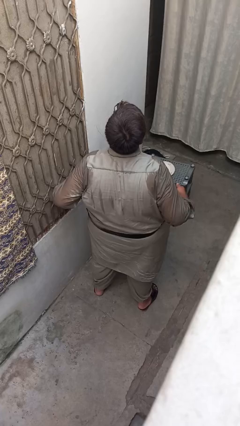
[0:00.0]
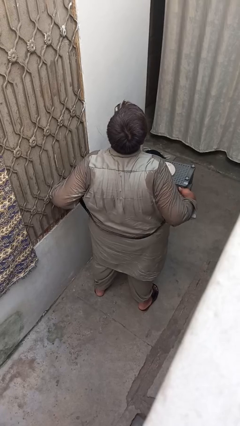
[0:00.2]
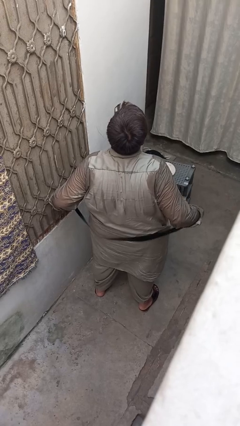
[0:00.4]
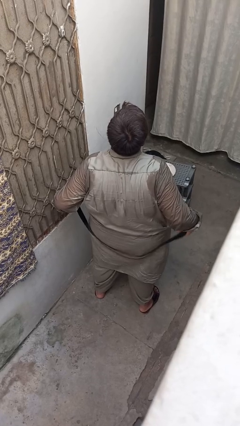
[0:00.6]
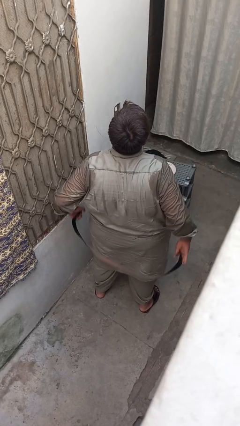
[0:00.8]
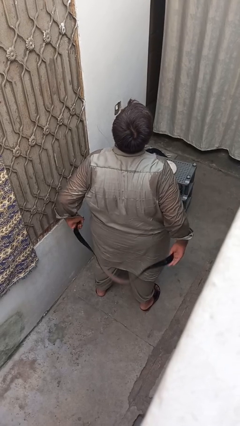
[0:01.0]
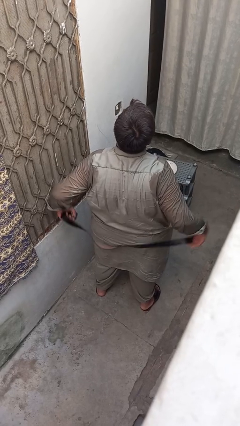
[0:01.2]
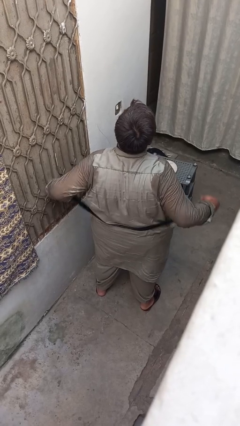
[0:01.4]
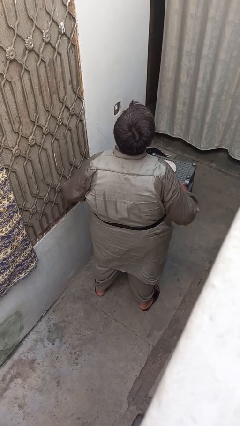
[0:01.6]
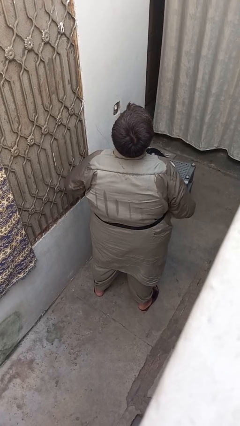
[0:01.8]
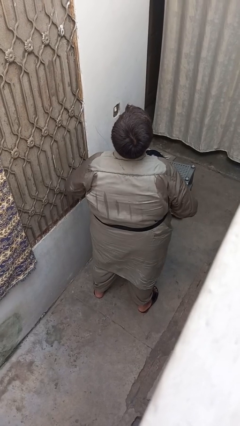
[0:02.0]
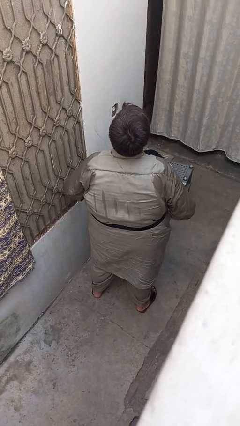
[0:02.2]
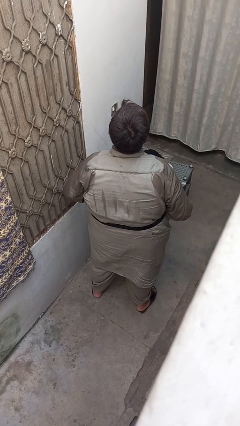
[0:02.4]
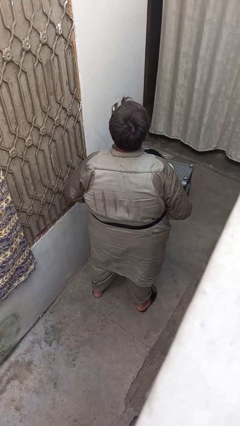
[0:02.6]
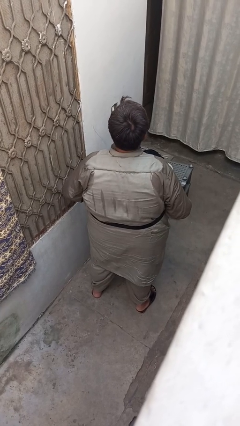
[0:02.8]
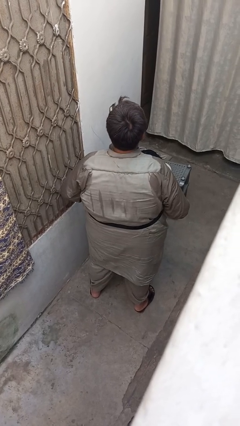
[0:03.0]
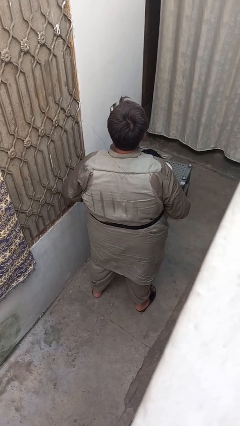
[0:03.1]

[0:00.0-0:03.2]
person puts on belt

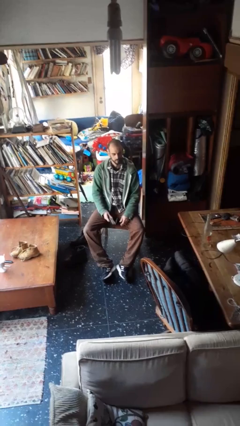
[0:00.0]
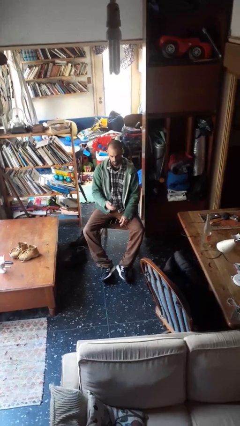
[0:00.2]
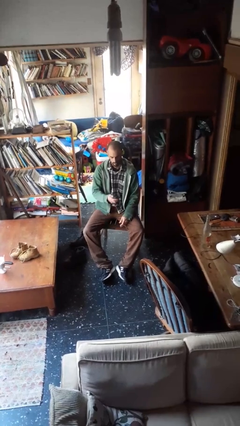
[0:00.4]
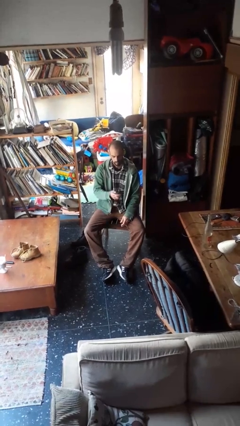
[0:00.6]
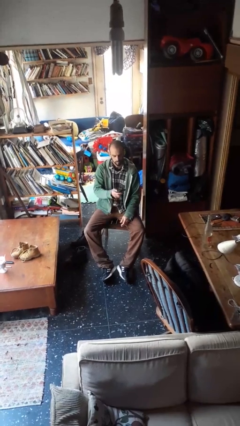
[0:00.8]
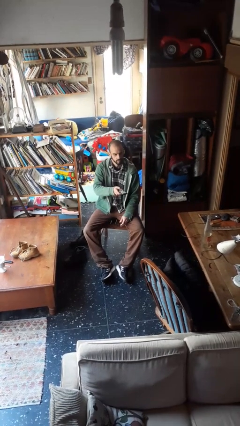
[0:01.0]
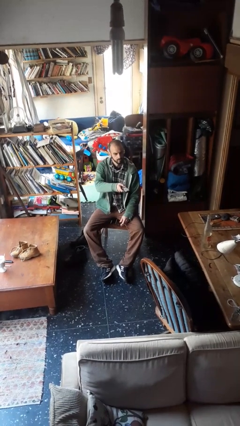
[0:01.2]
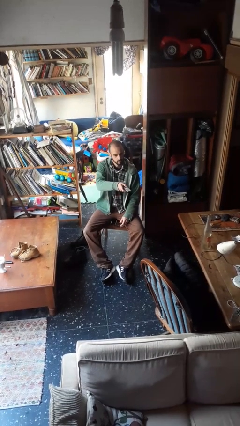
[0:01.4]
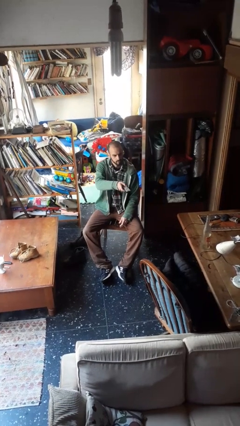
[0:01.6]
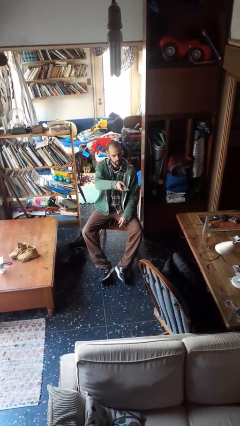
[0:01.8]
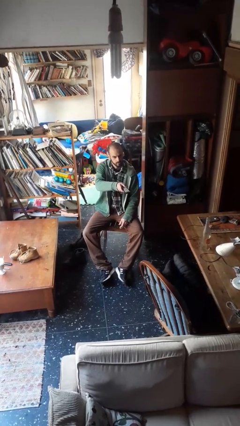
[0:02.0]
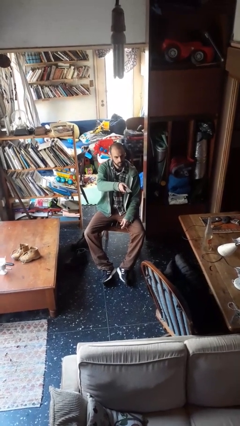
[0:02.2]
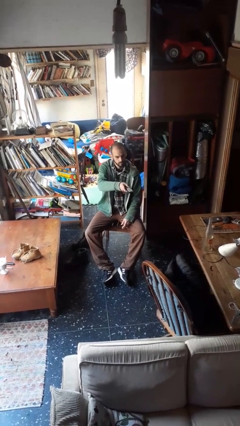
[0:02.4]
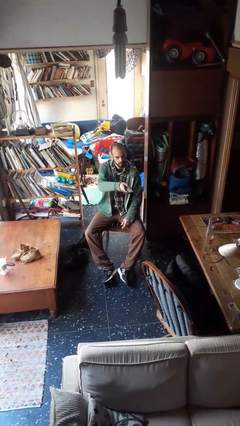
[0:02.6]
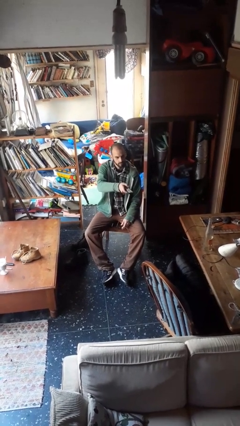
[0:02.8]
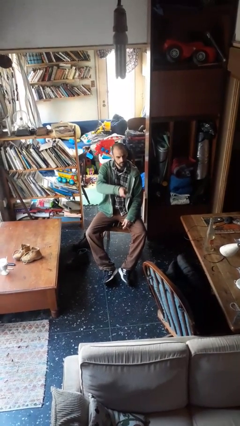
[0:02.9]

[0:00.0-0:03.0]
person uses television remote

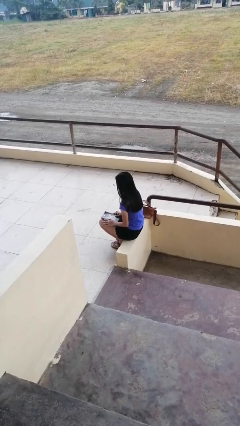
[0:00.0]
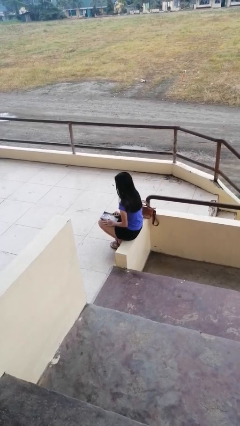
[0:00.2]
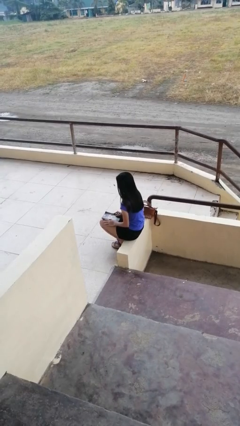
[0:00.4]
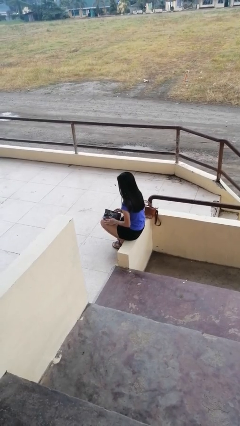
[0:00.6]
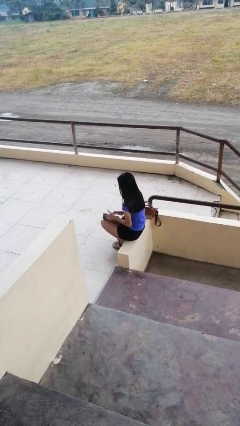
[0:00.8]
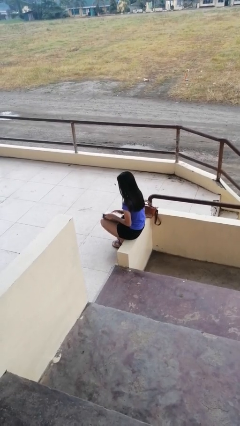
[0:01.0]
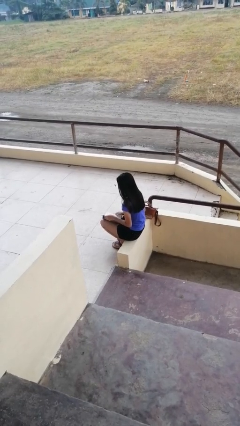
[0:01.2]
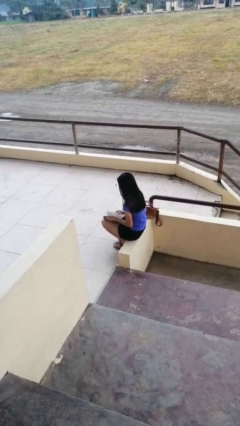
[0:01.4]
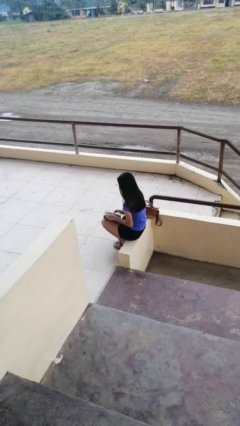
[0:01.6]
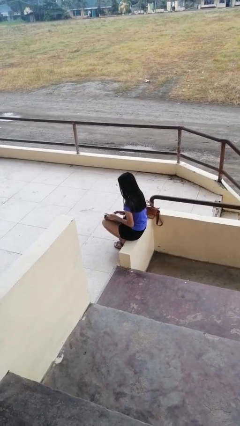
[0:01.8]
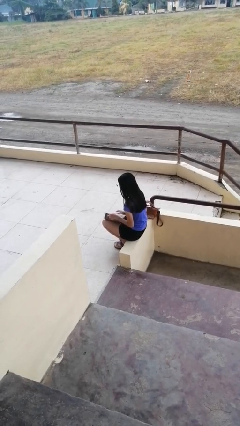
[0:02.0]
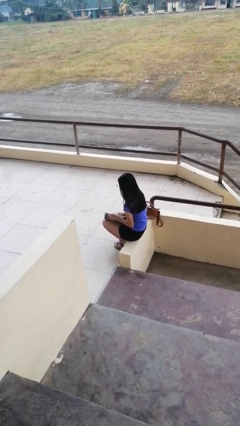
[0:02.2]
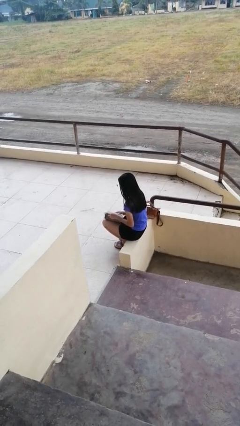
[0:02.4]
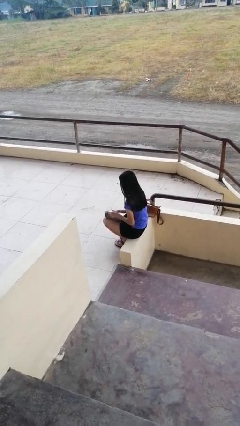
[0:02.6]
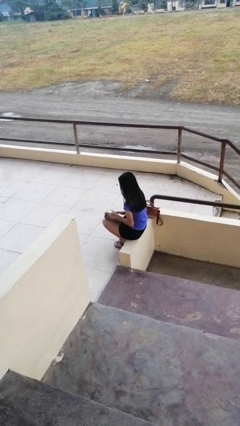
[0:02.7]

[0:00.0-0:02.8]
person reads book

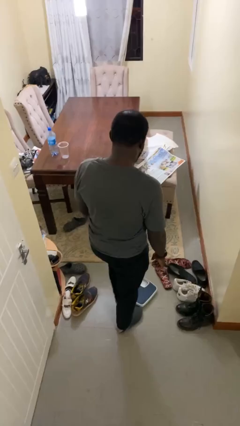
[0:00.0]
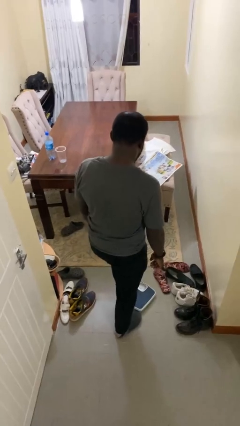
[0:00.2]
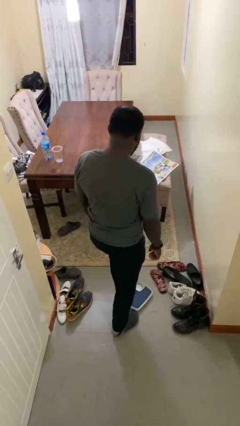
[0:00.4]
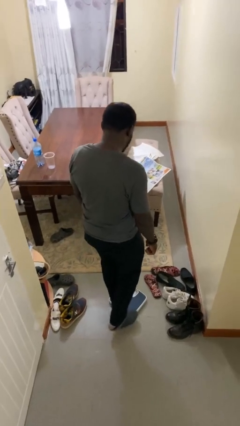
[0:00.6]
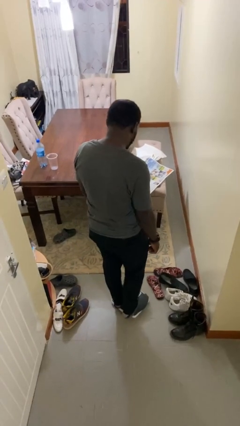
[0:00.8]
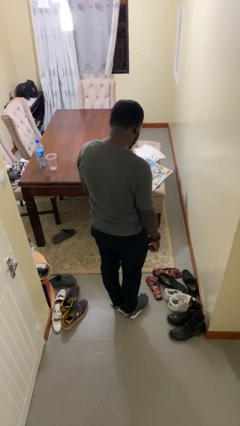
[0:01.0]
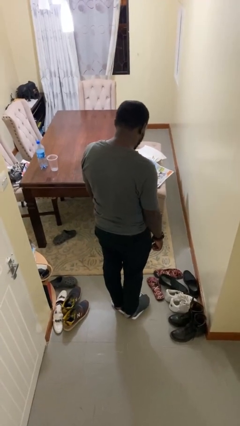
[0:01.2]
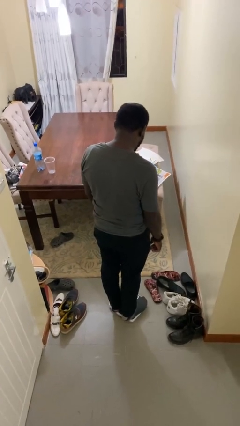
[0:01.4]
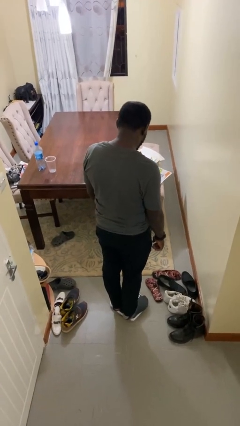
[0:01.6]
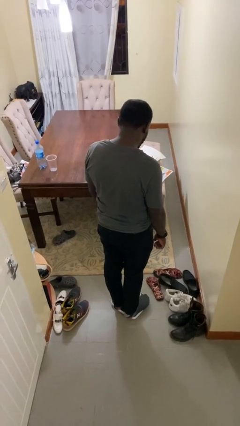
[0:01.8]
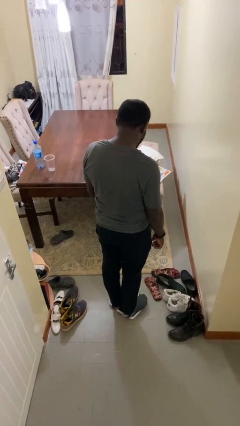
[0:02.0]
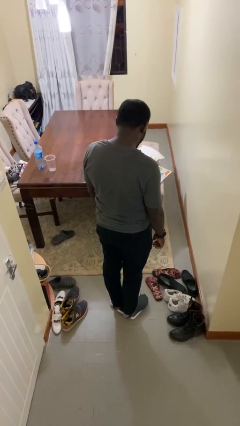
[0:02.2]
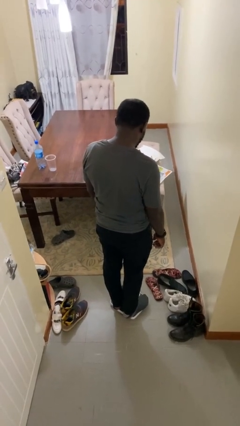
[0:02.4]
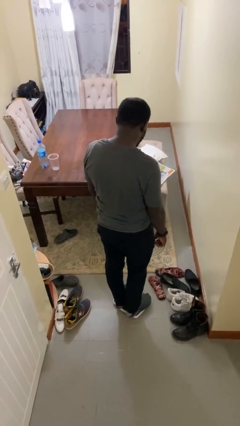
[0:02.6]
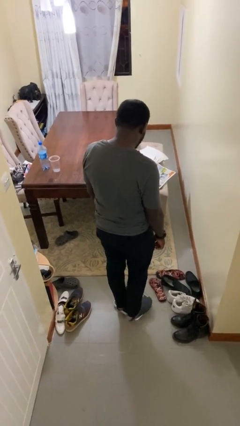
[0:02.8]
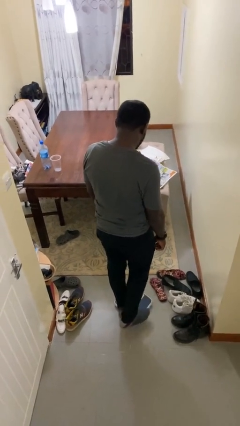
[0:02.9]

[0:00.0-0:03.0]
person uses bodyweight scale

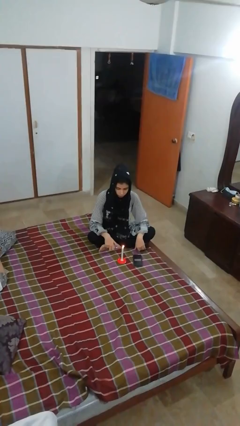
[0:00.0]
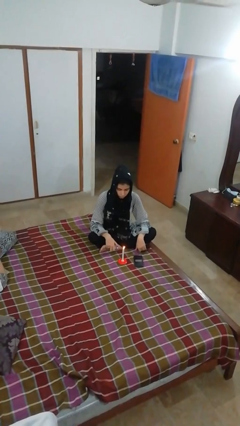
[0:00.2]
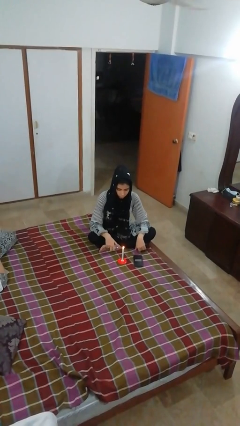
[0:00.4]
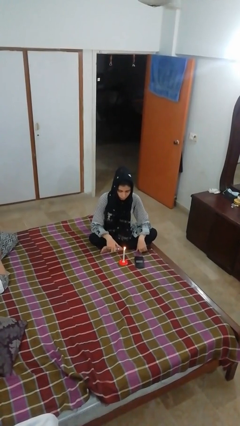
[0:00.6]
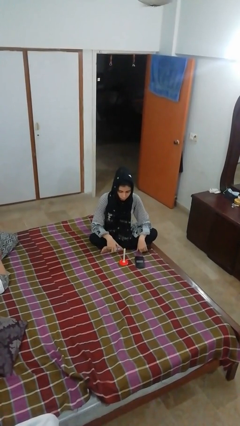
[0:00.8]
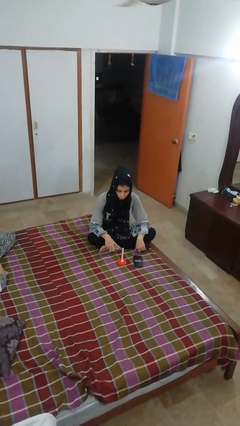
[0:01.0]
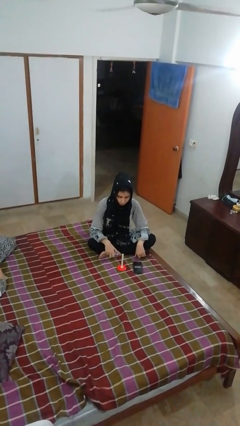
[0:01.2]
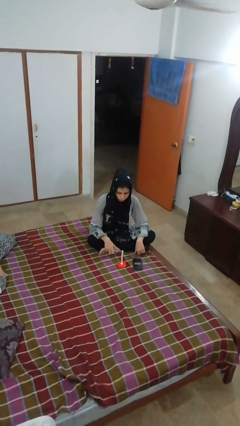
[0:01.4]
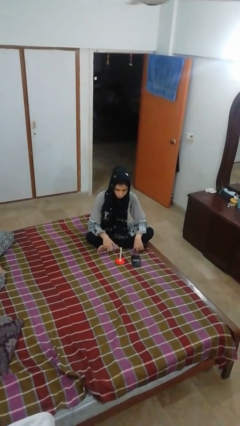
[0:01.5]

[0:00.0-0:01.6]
person extinguishes candle

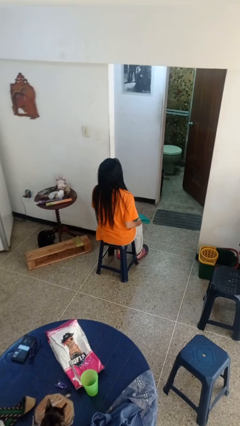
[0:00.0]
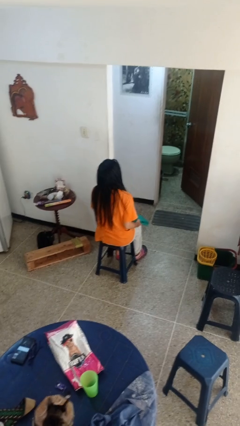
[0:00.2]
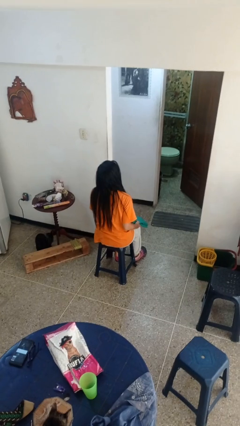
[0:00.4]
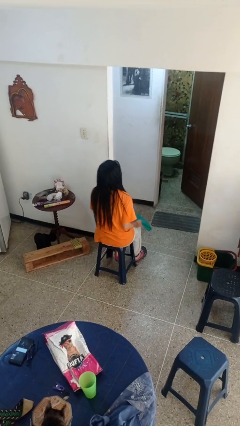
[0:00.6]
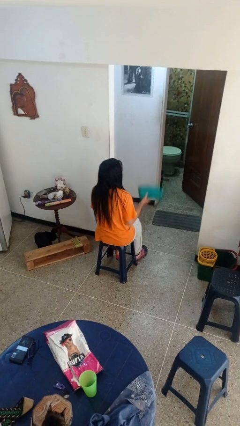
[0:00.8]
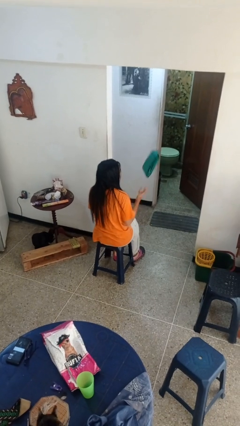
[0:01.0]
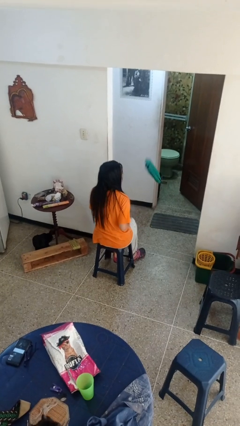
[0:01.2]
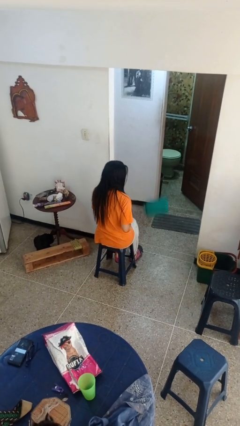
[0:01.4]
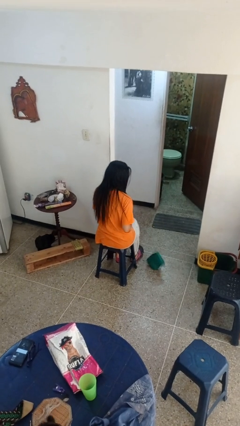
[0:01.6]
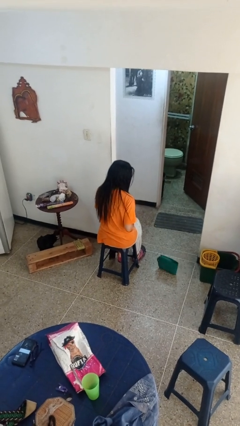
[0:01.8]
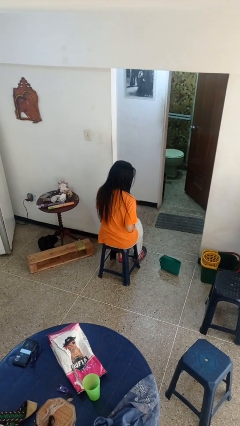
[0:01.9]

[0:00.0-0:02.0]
person throws object into air

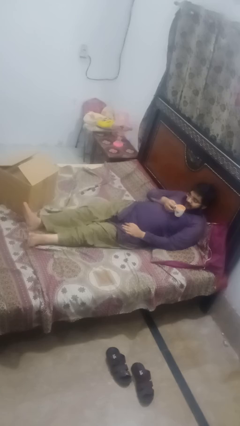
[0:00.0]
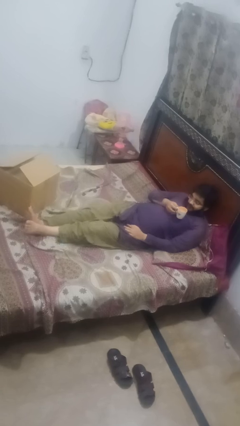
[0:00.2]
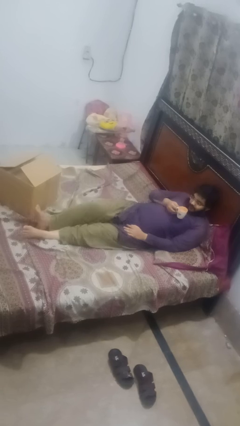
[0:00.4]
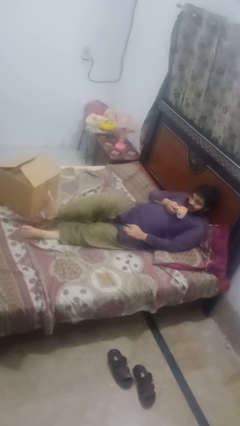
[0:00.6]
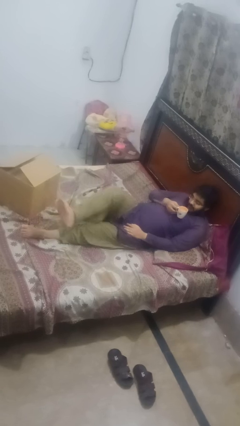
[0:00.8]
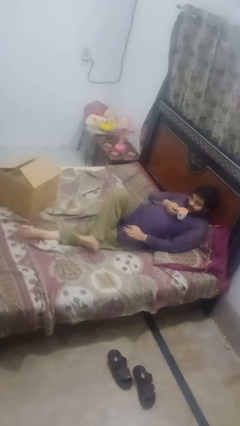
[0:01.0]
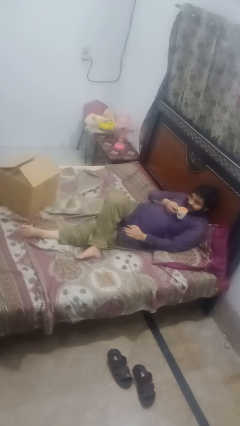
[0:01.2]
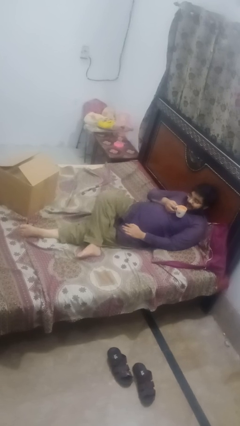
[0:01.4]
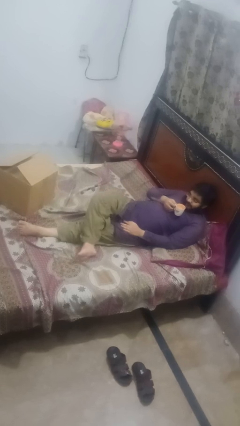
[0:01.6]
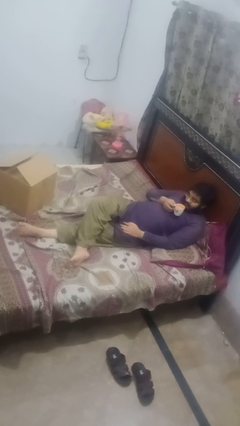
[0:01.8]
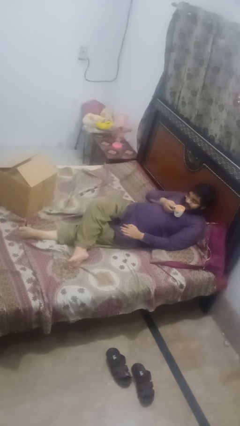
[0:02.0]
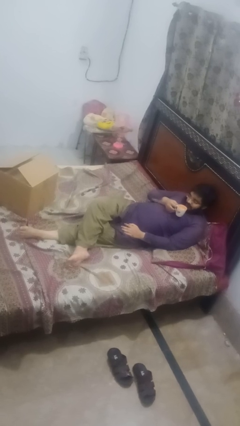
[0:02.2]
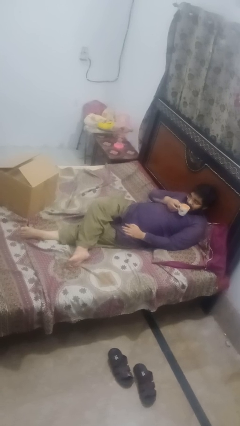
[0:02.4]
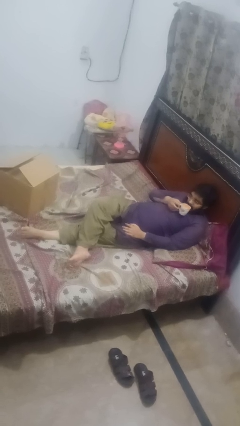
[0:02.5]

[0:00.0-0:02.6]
person crosses legs
